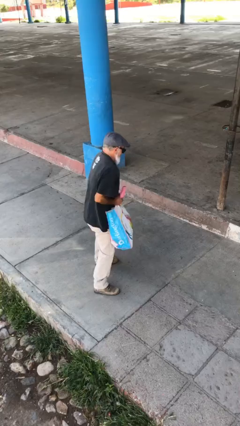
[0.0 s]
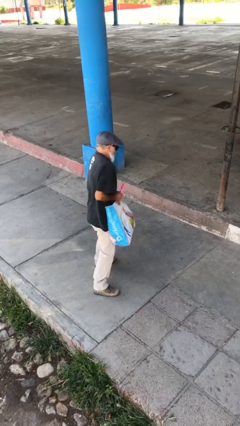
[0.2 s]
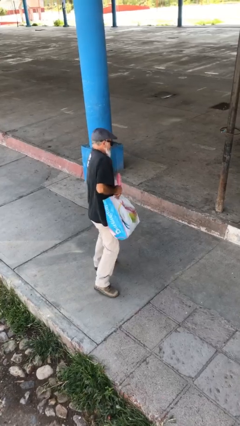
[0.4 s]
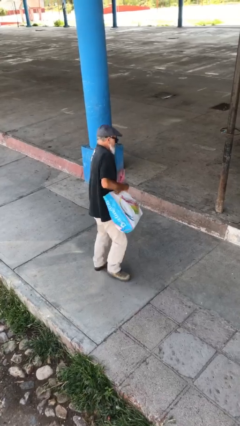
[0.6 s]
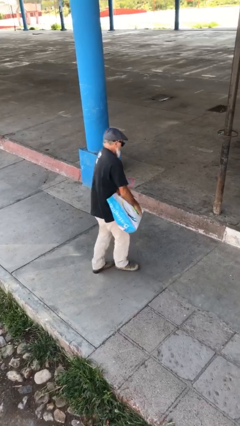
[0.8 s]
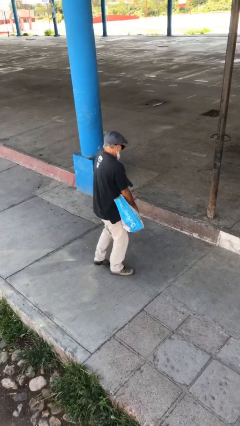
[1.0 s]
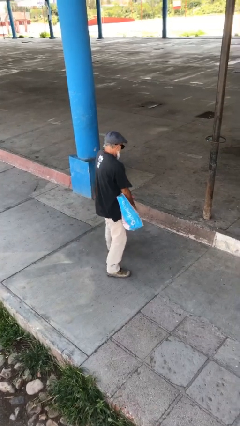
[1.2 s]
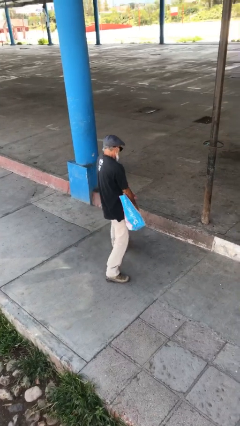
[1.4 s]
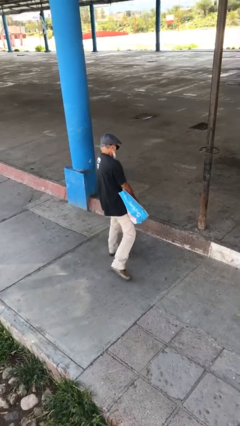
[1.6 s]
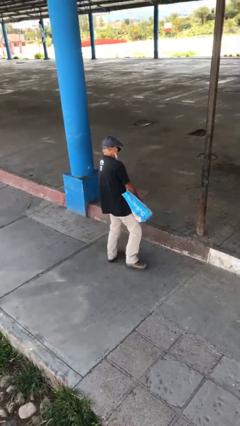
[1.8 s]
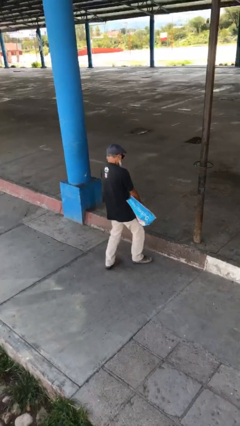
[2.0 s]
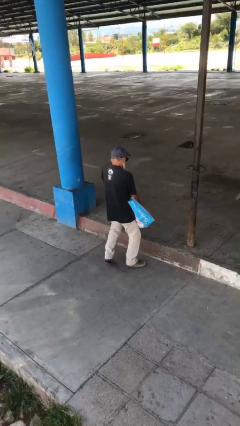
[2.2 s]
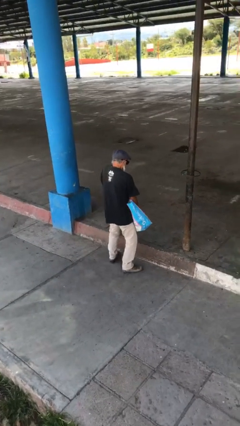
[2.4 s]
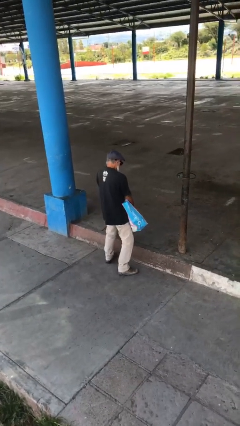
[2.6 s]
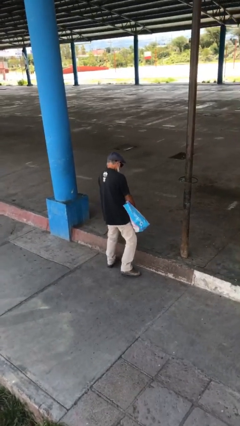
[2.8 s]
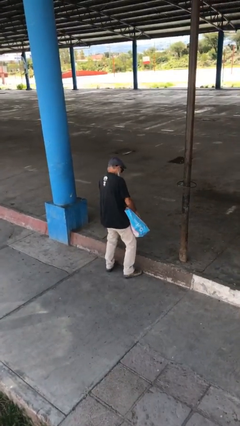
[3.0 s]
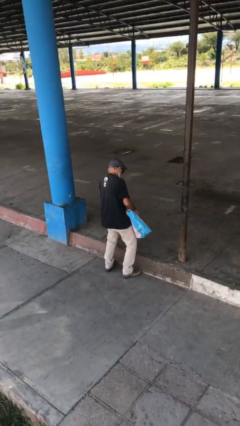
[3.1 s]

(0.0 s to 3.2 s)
person carries heavy object

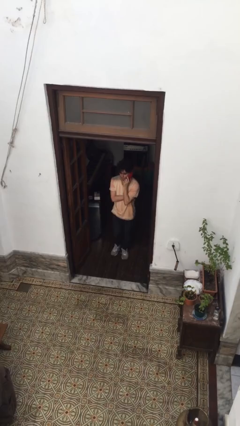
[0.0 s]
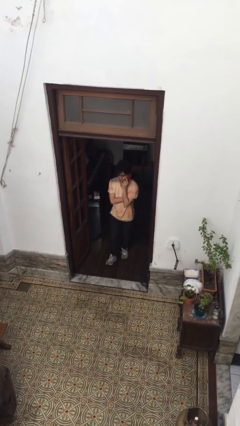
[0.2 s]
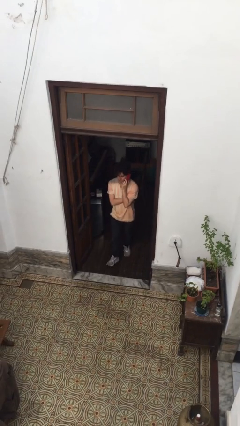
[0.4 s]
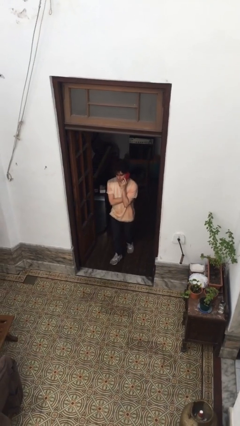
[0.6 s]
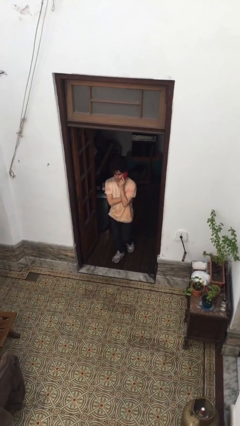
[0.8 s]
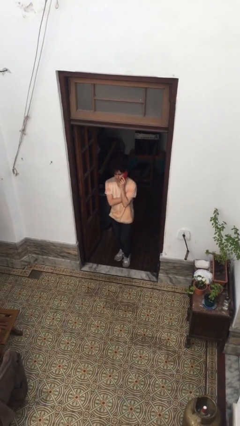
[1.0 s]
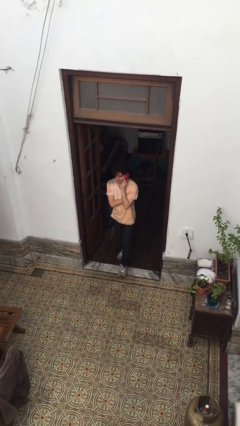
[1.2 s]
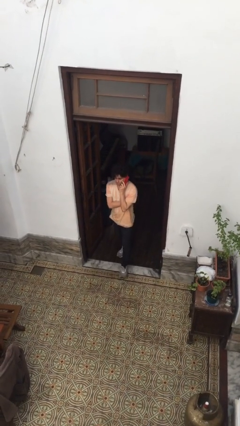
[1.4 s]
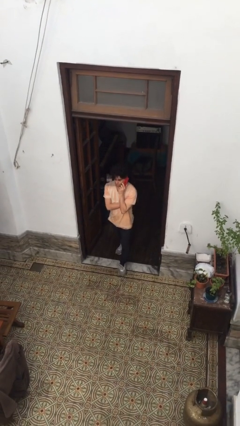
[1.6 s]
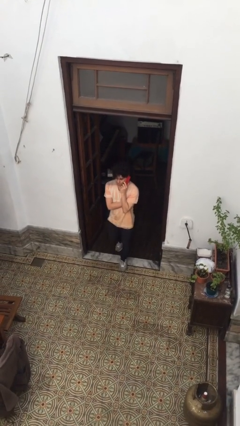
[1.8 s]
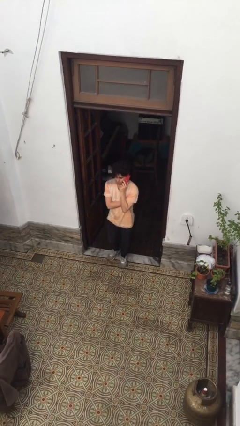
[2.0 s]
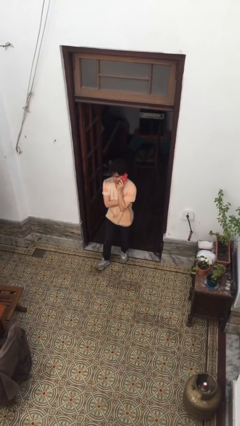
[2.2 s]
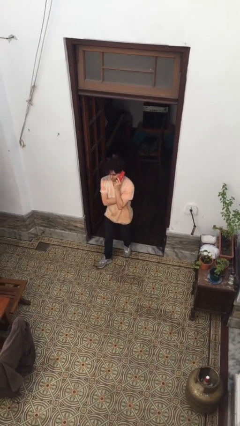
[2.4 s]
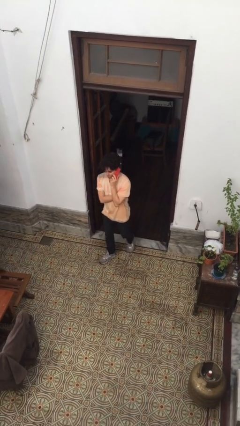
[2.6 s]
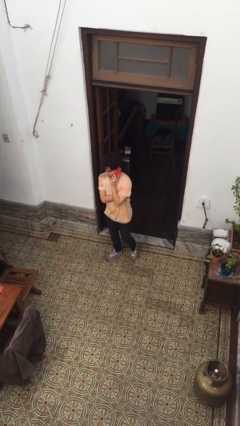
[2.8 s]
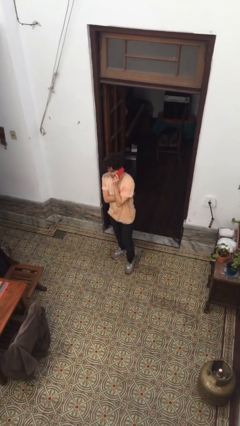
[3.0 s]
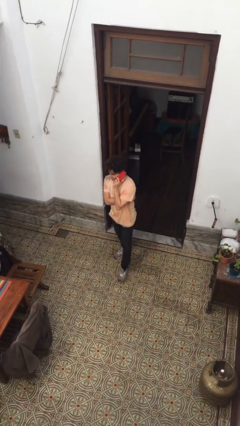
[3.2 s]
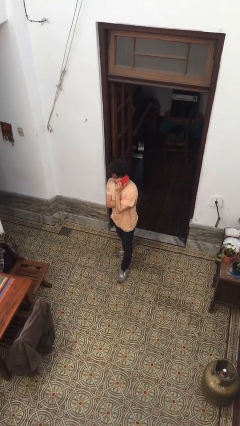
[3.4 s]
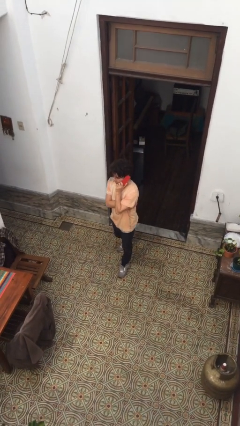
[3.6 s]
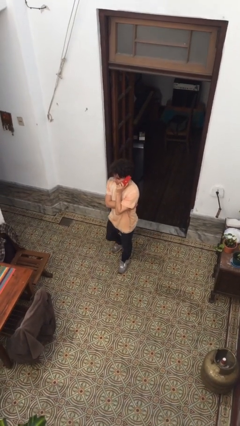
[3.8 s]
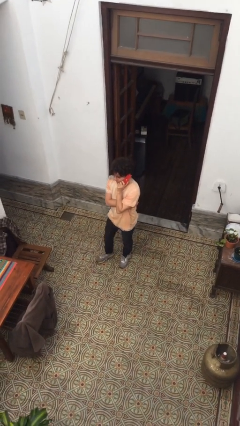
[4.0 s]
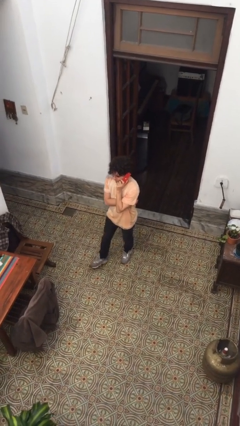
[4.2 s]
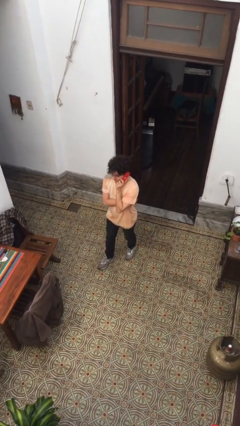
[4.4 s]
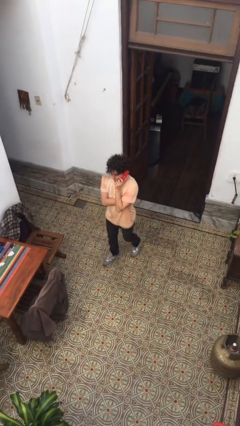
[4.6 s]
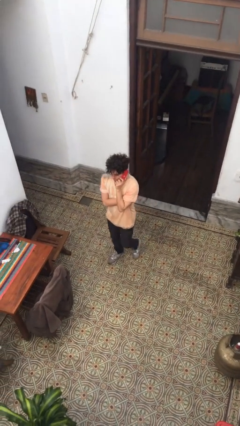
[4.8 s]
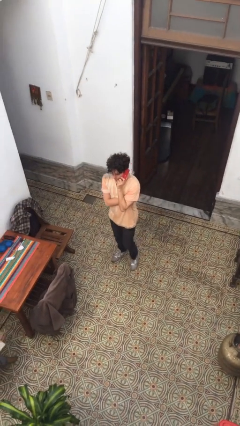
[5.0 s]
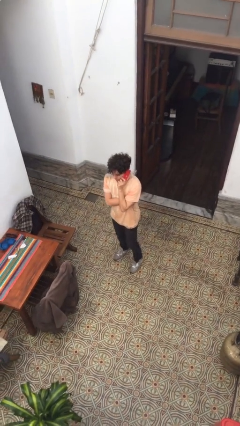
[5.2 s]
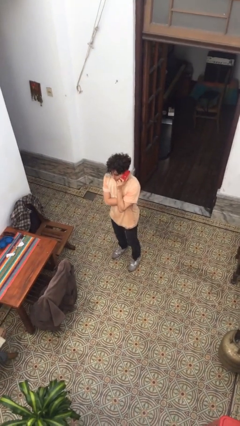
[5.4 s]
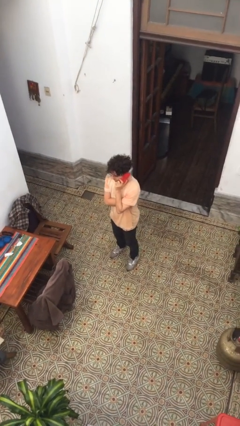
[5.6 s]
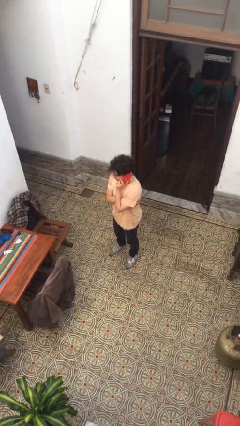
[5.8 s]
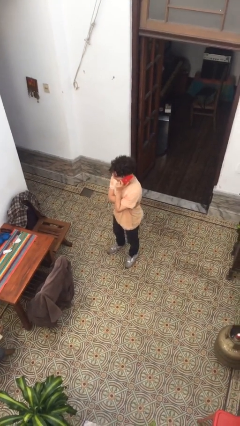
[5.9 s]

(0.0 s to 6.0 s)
person enters scene through structure

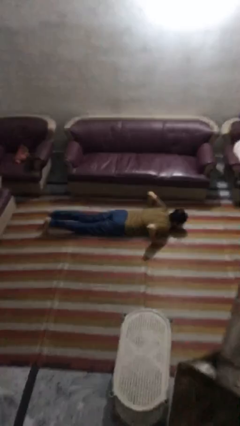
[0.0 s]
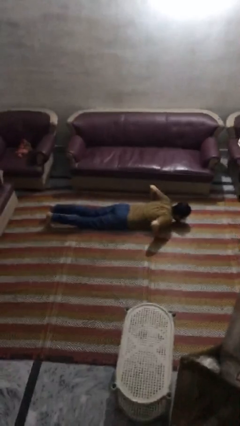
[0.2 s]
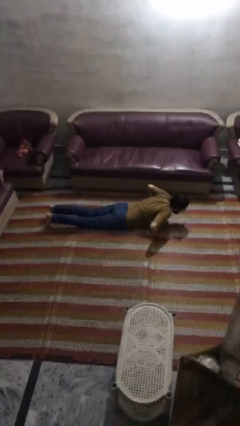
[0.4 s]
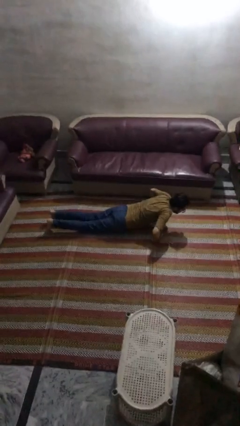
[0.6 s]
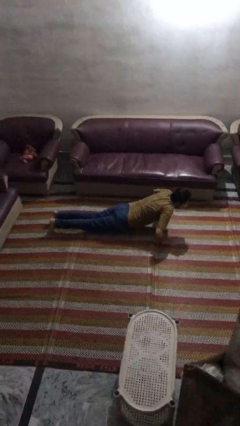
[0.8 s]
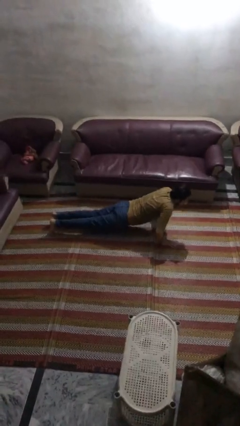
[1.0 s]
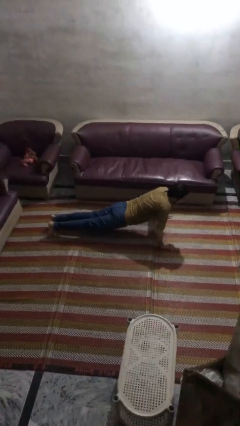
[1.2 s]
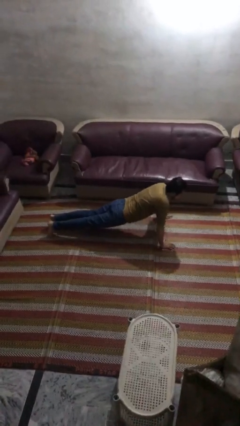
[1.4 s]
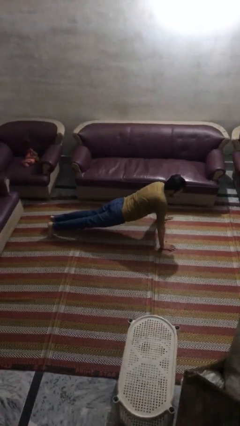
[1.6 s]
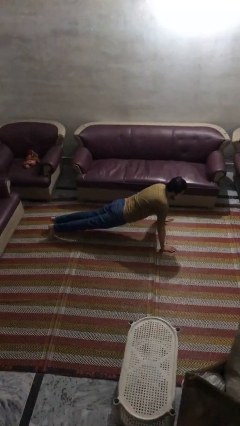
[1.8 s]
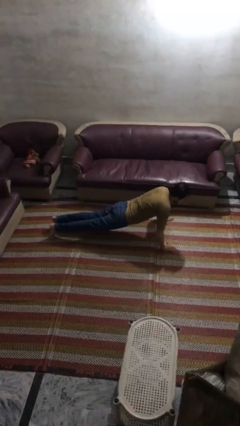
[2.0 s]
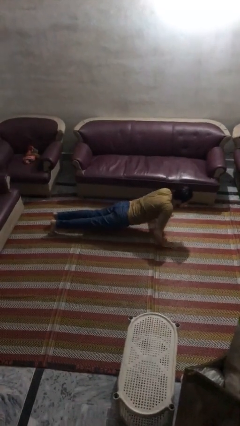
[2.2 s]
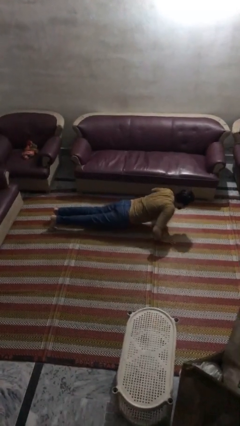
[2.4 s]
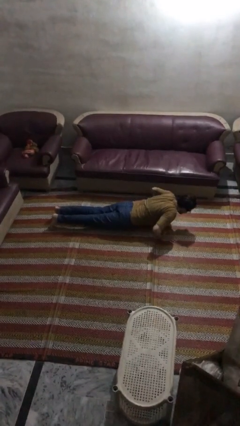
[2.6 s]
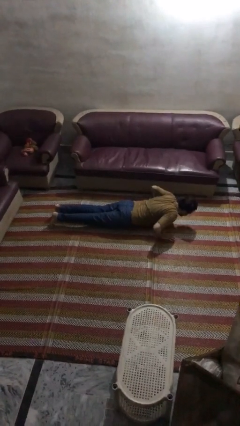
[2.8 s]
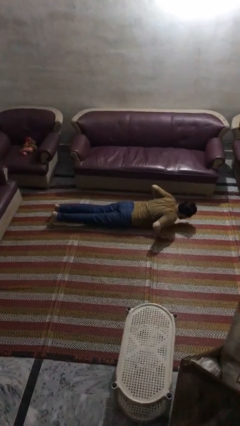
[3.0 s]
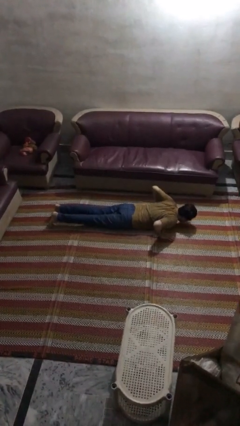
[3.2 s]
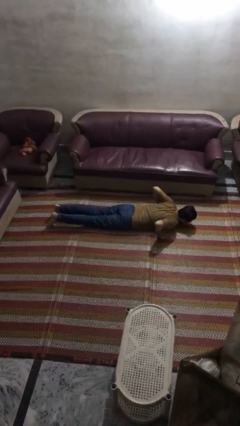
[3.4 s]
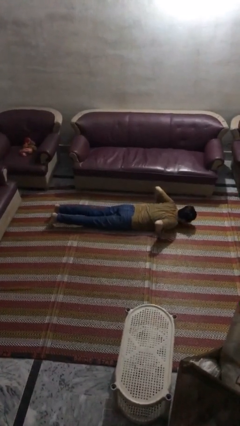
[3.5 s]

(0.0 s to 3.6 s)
person exercises with pushup

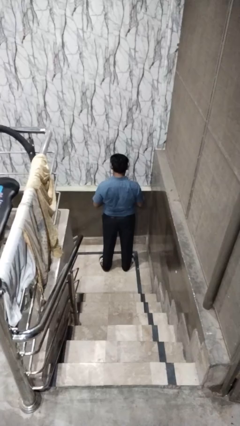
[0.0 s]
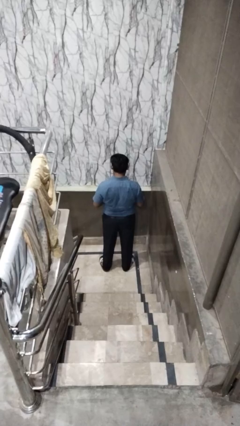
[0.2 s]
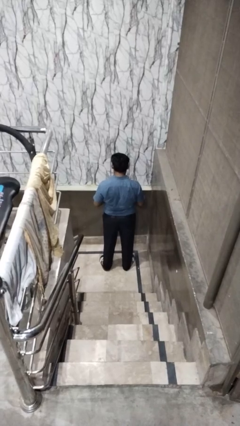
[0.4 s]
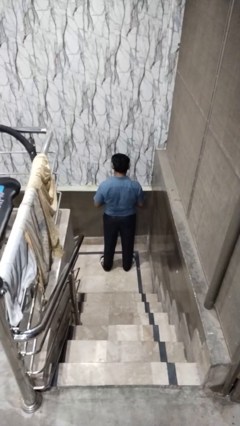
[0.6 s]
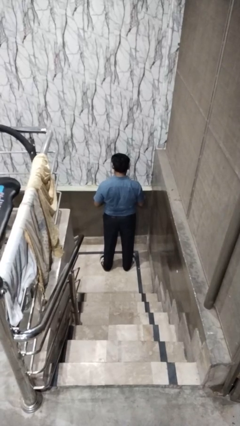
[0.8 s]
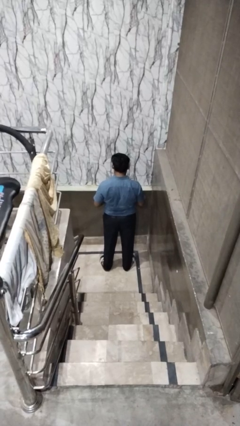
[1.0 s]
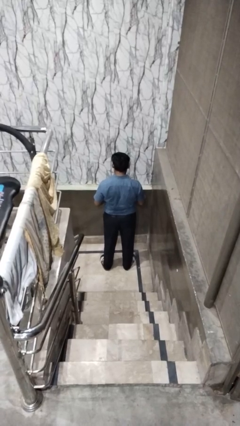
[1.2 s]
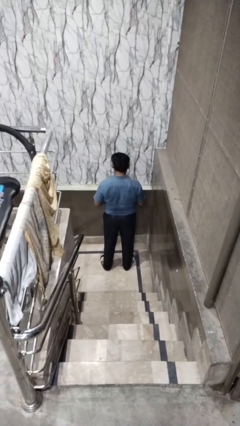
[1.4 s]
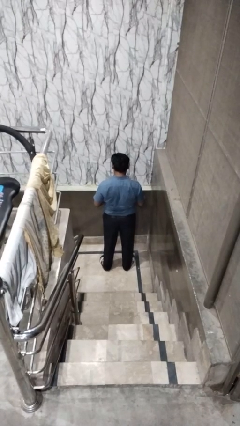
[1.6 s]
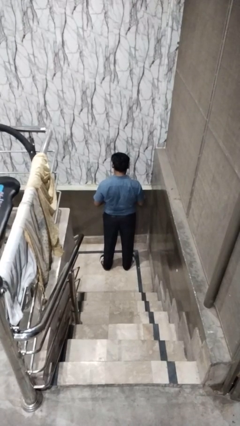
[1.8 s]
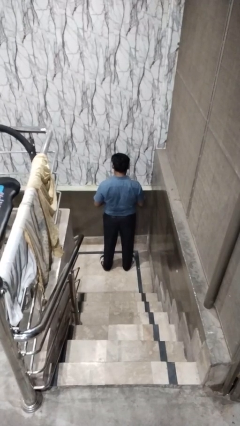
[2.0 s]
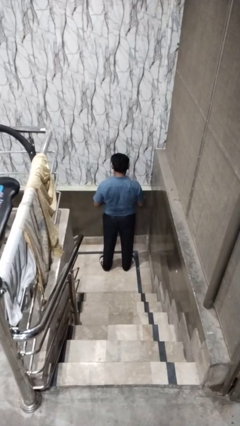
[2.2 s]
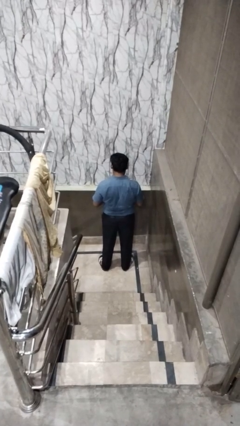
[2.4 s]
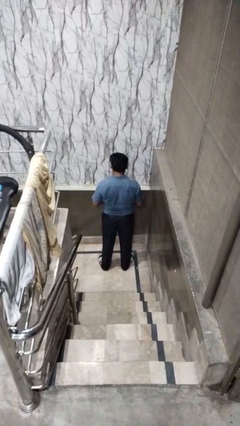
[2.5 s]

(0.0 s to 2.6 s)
person sticks out tongue

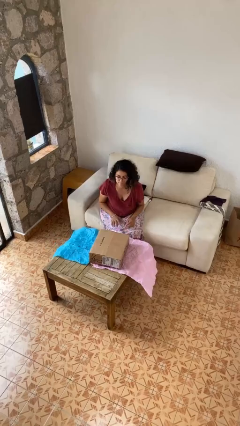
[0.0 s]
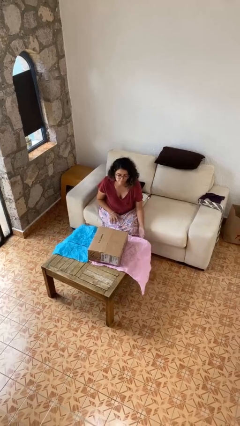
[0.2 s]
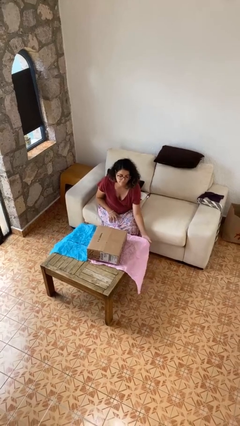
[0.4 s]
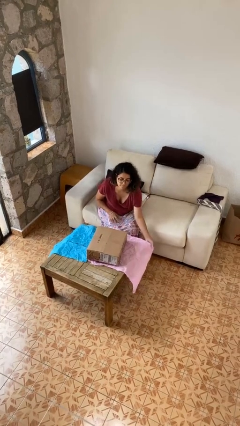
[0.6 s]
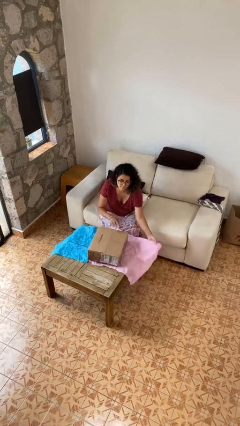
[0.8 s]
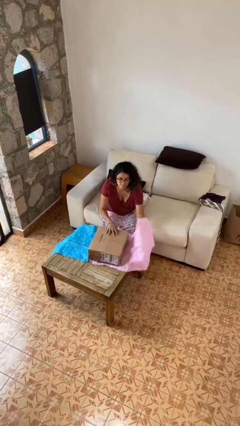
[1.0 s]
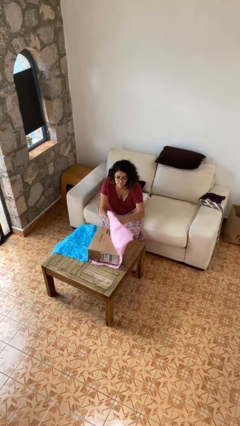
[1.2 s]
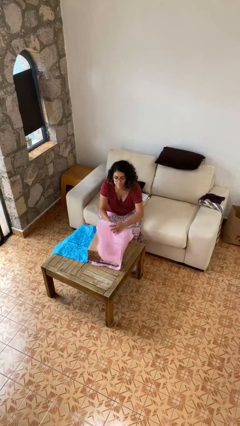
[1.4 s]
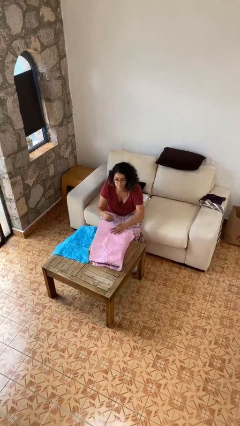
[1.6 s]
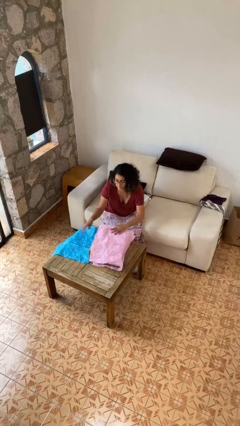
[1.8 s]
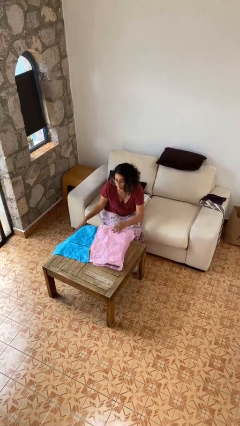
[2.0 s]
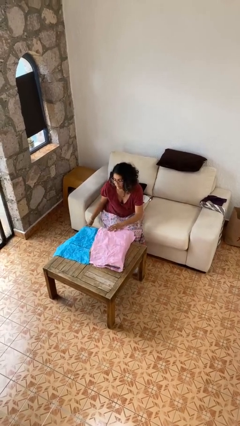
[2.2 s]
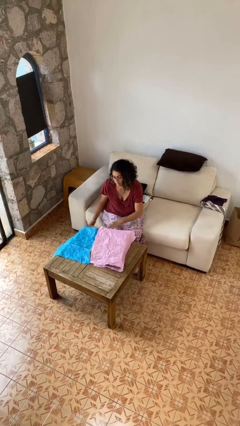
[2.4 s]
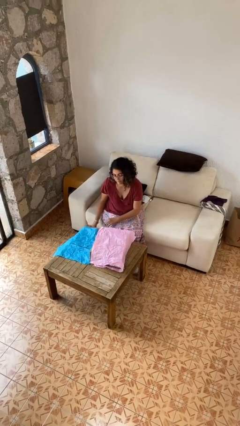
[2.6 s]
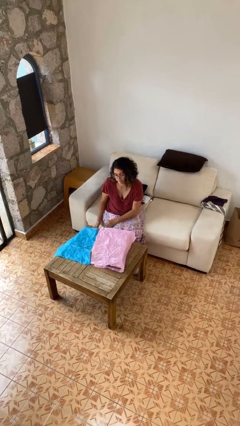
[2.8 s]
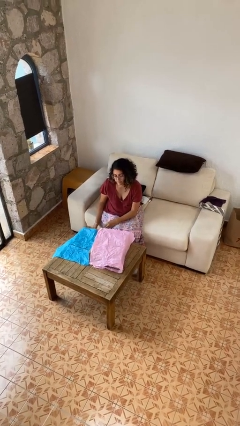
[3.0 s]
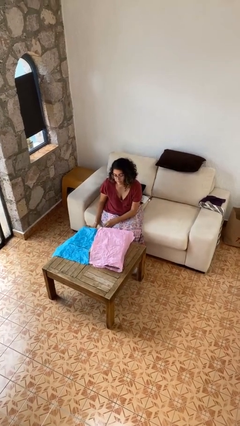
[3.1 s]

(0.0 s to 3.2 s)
person wraps box
